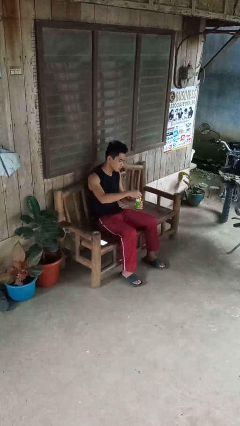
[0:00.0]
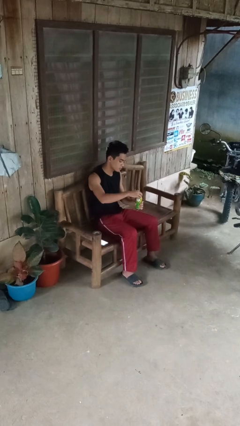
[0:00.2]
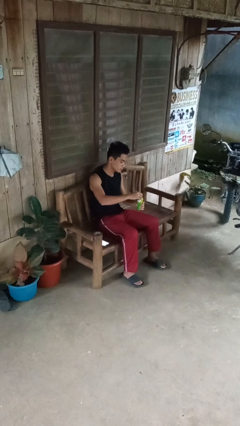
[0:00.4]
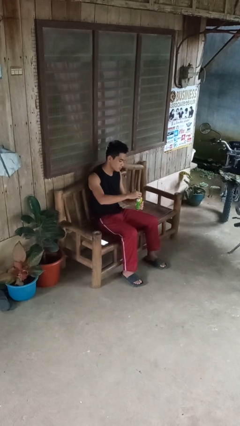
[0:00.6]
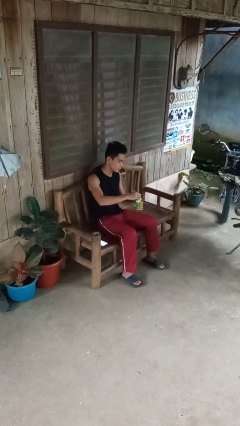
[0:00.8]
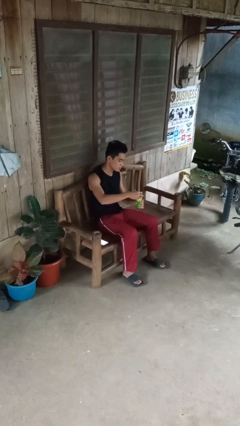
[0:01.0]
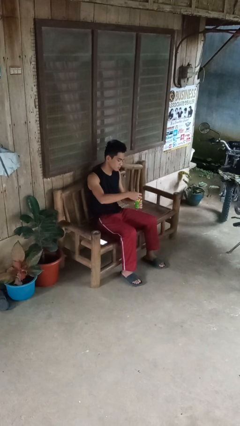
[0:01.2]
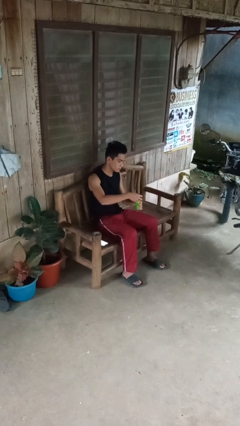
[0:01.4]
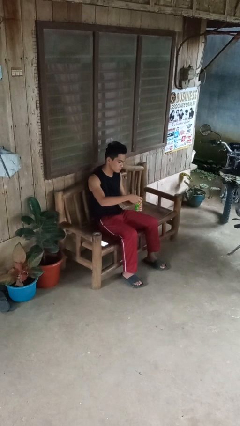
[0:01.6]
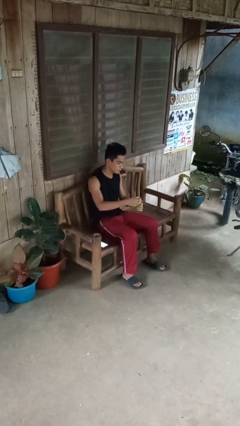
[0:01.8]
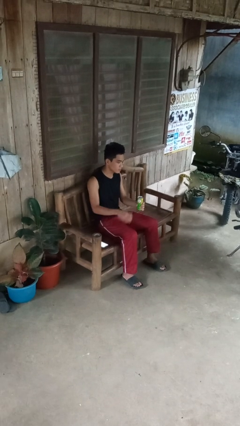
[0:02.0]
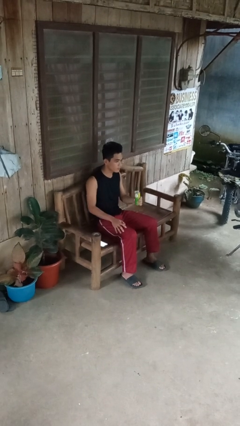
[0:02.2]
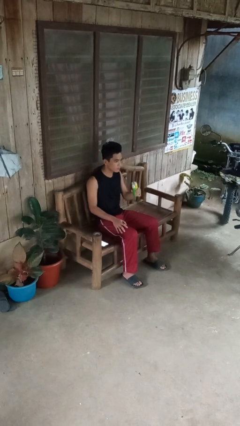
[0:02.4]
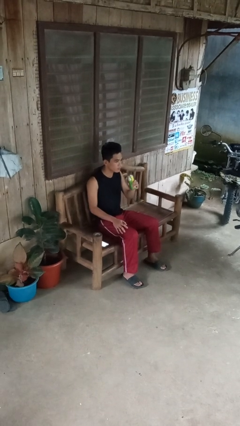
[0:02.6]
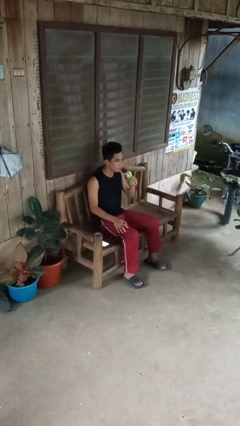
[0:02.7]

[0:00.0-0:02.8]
person opens beverage can

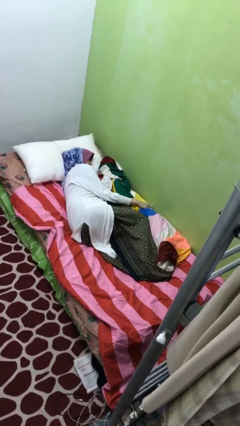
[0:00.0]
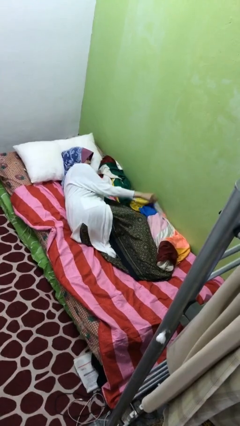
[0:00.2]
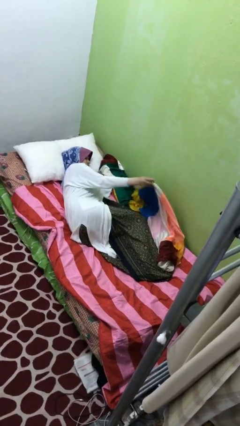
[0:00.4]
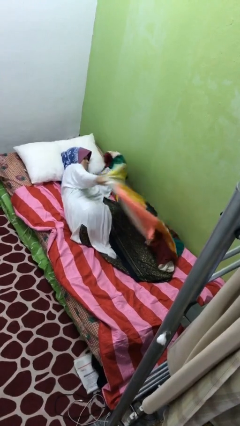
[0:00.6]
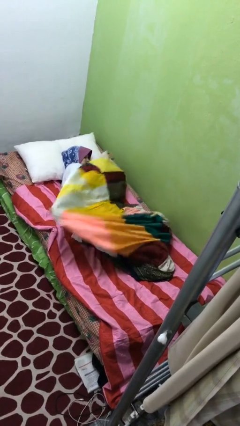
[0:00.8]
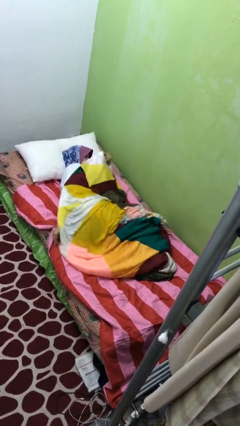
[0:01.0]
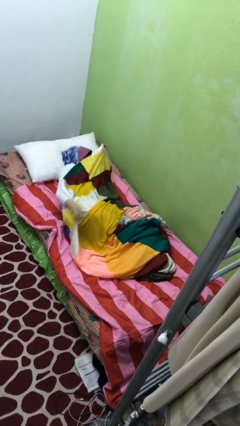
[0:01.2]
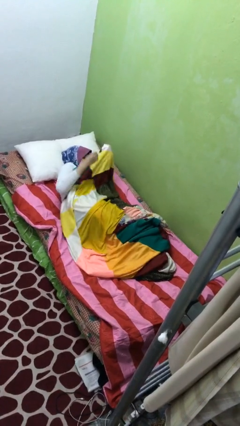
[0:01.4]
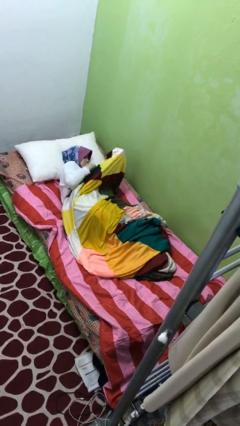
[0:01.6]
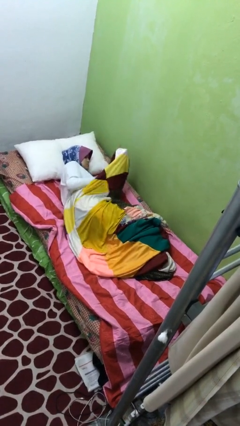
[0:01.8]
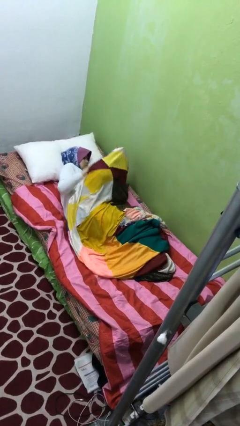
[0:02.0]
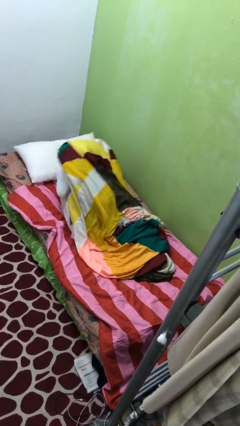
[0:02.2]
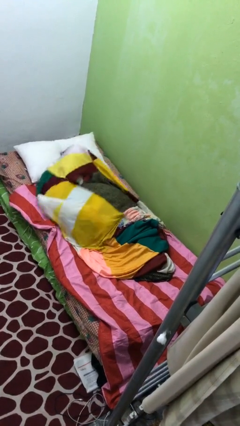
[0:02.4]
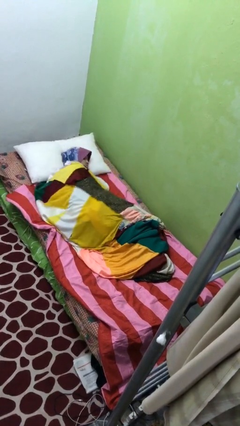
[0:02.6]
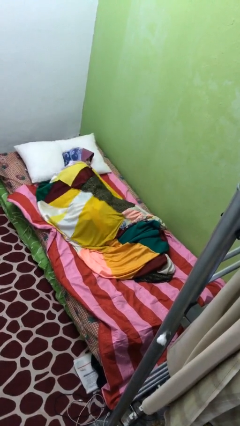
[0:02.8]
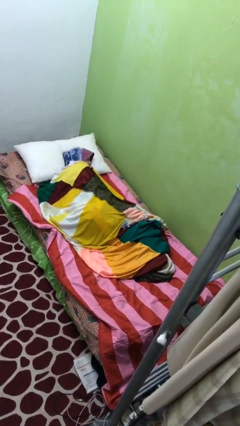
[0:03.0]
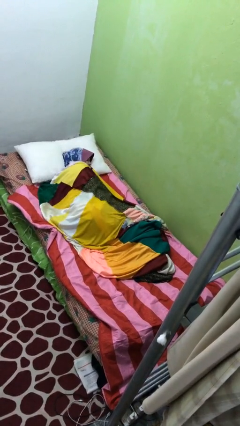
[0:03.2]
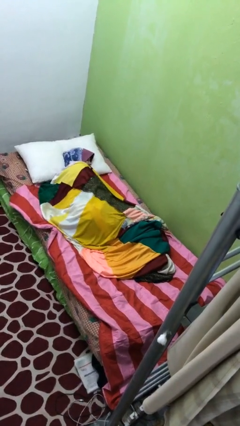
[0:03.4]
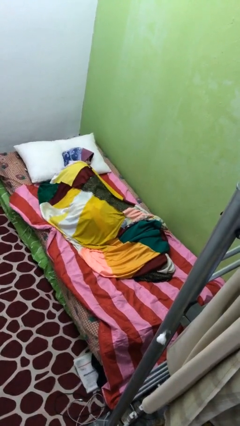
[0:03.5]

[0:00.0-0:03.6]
person covers with blanket

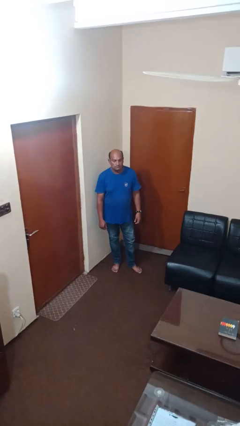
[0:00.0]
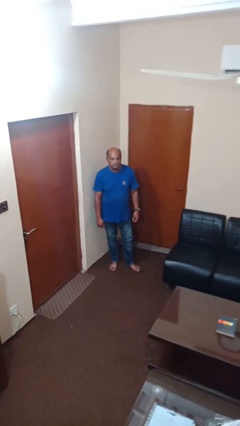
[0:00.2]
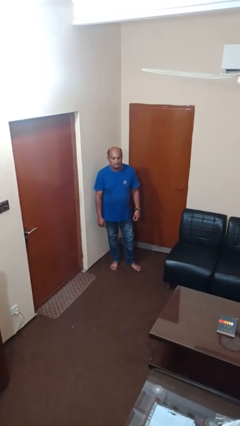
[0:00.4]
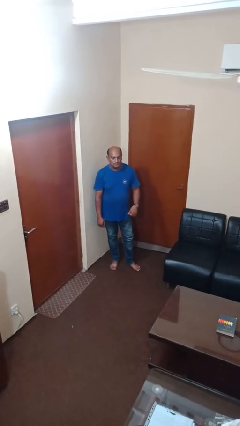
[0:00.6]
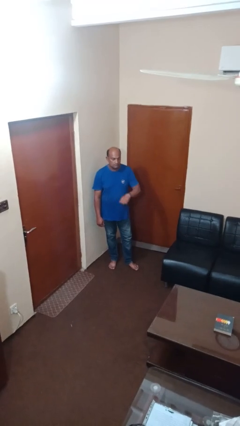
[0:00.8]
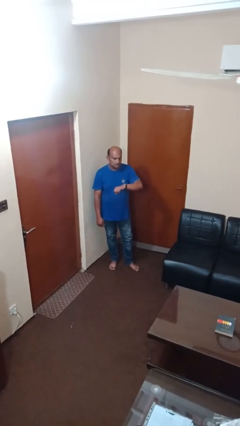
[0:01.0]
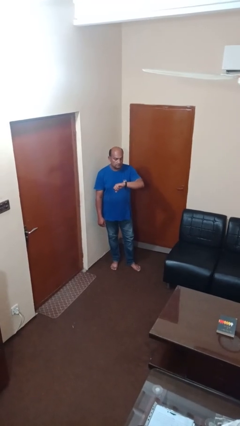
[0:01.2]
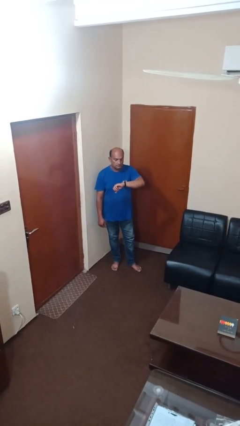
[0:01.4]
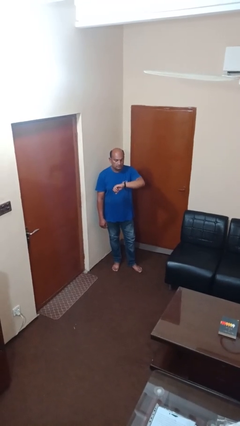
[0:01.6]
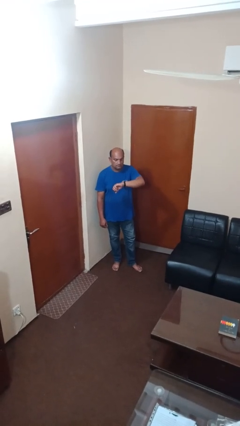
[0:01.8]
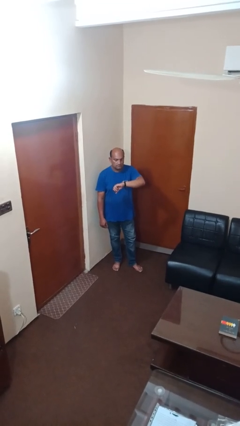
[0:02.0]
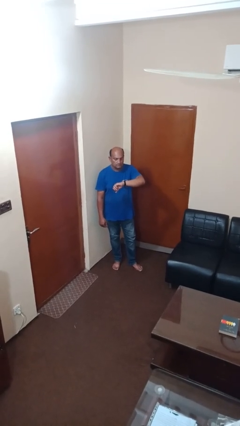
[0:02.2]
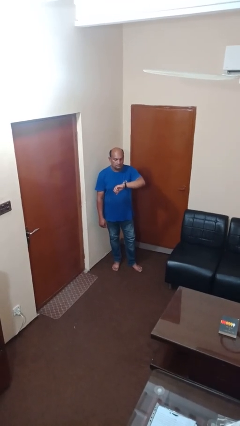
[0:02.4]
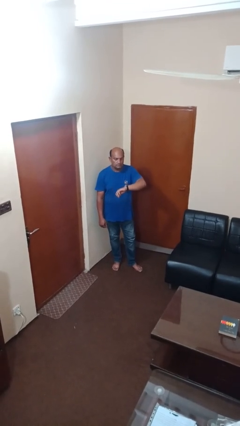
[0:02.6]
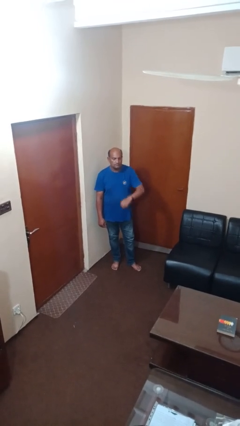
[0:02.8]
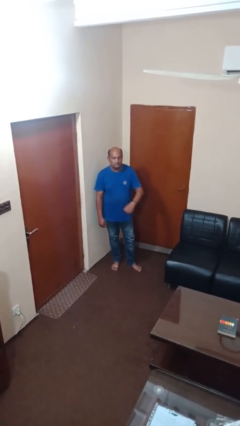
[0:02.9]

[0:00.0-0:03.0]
person looks at wristwatch

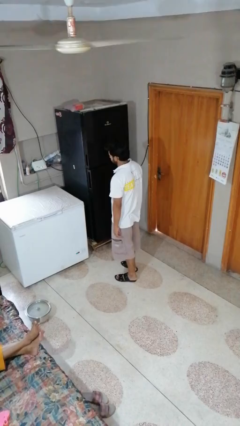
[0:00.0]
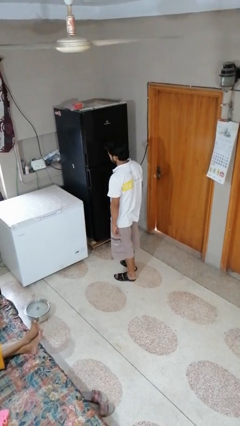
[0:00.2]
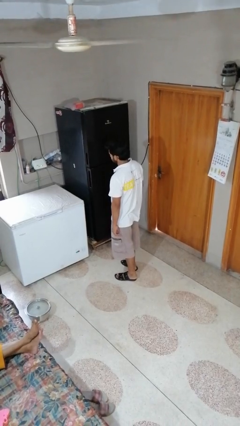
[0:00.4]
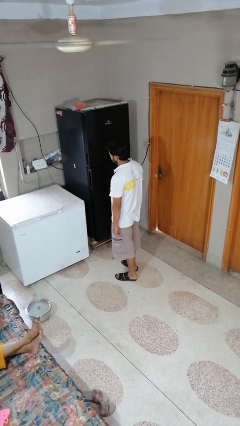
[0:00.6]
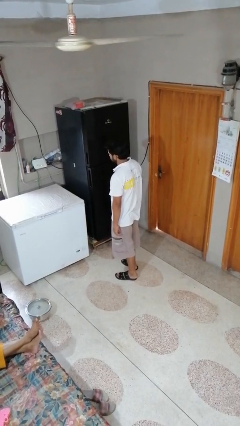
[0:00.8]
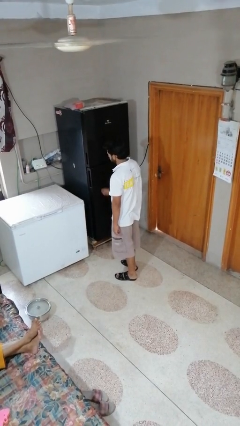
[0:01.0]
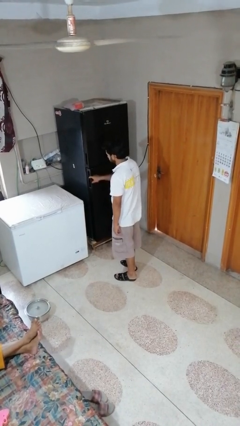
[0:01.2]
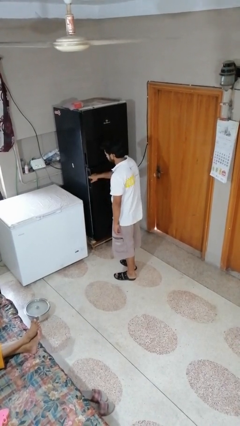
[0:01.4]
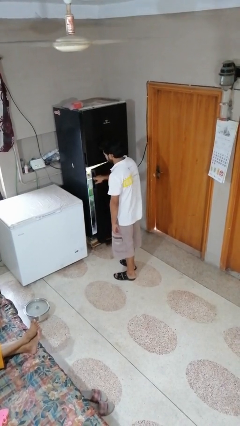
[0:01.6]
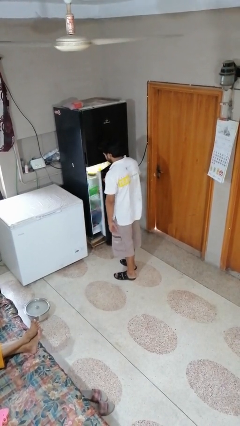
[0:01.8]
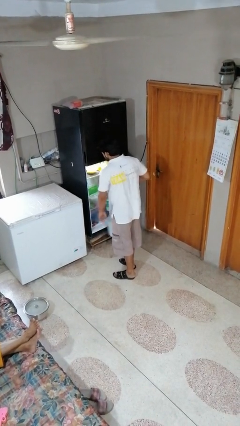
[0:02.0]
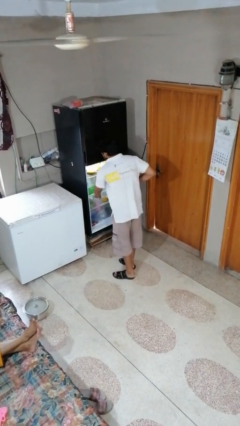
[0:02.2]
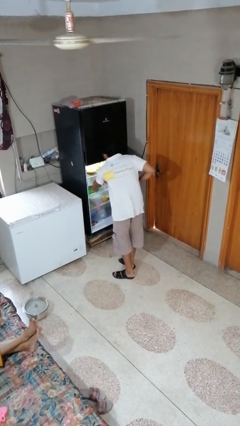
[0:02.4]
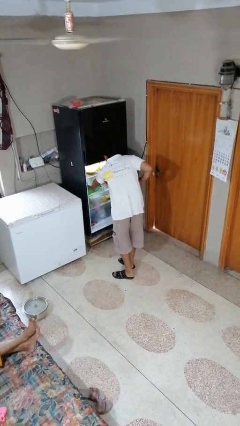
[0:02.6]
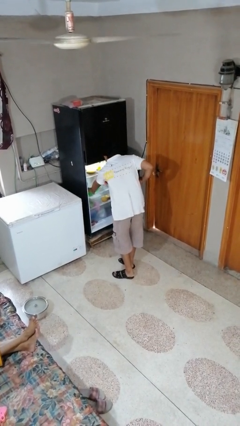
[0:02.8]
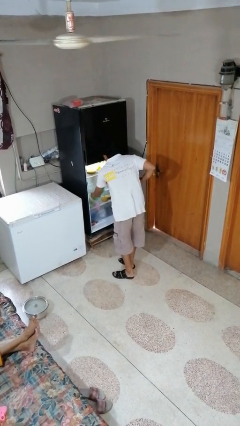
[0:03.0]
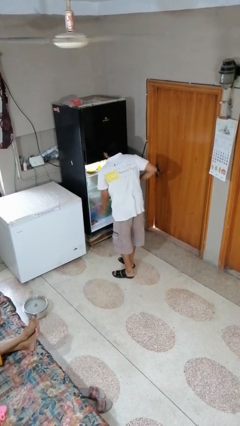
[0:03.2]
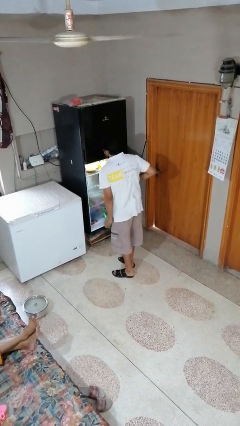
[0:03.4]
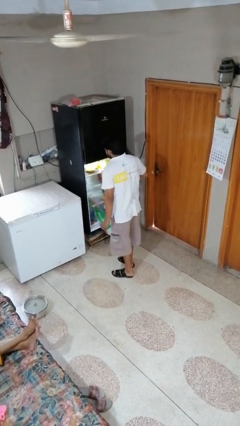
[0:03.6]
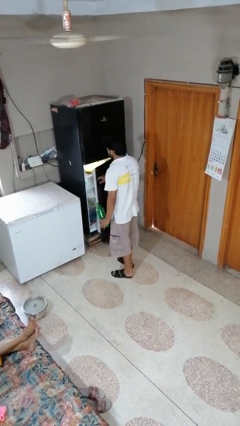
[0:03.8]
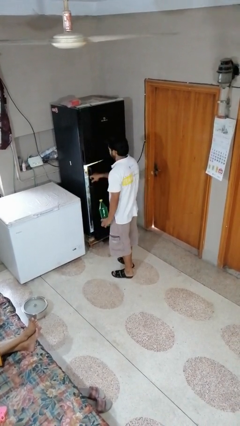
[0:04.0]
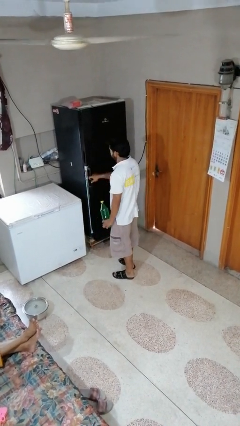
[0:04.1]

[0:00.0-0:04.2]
person takes object from refrigerator

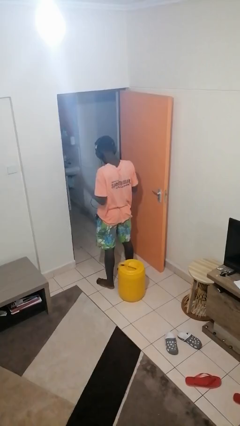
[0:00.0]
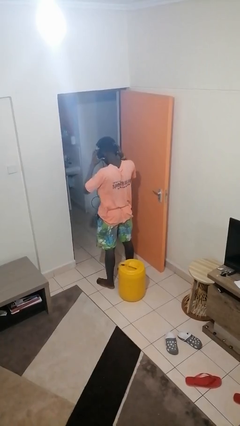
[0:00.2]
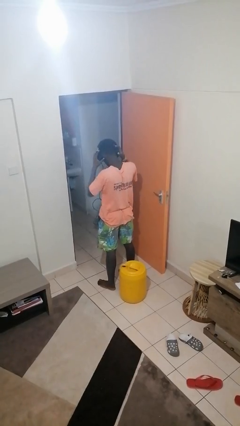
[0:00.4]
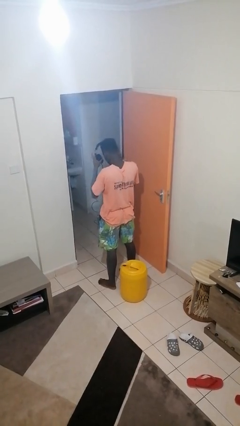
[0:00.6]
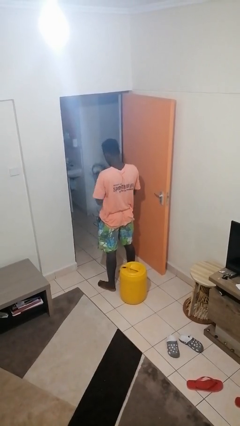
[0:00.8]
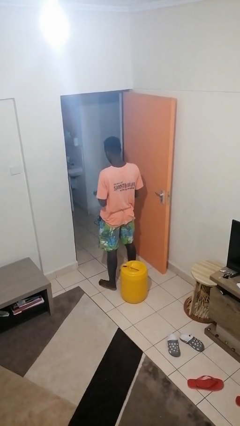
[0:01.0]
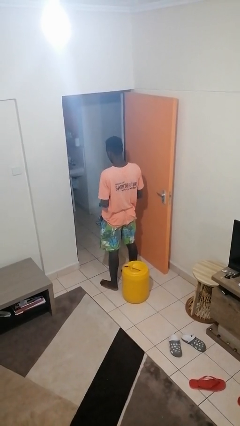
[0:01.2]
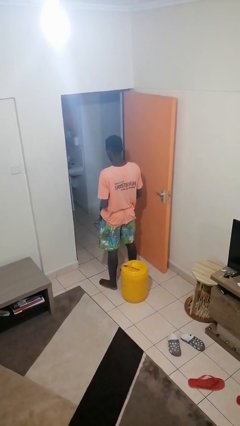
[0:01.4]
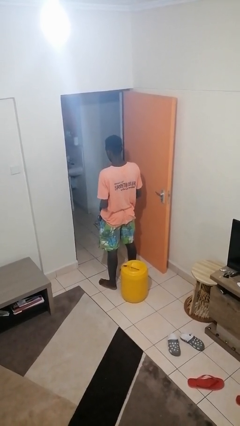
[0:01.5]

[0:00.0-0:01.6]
person takes off headphones

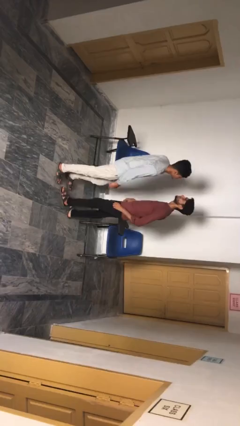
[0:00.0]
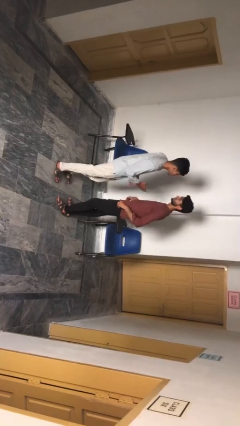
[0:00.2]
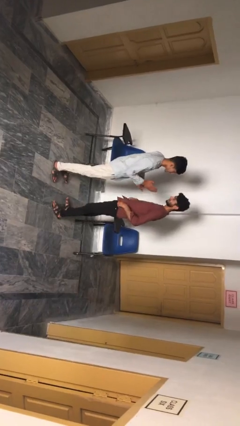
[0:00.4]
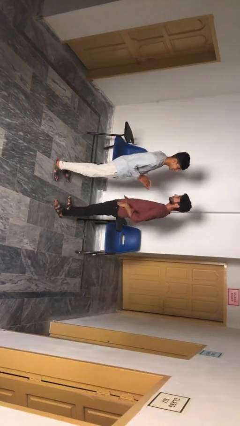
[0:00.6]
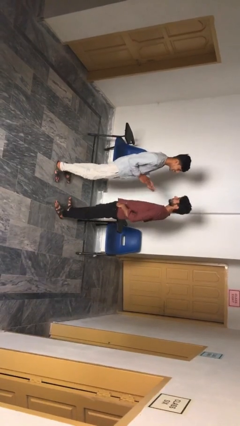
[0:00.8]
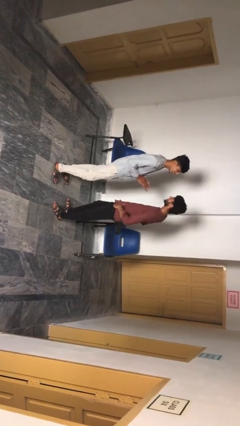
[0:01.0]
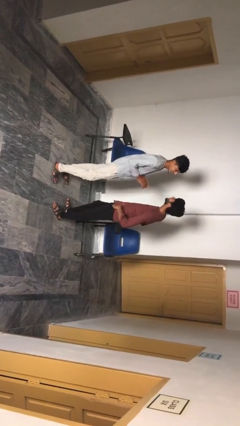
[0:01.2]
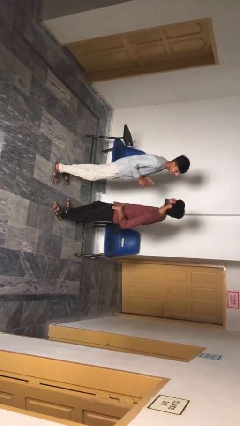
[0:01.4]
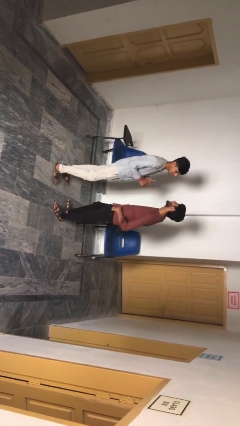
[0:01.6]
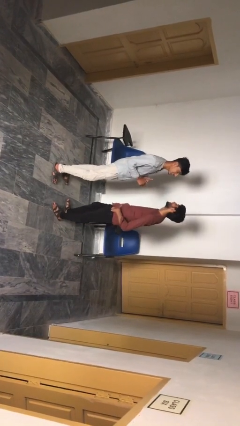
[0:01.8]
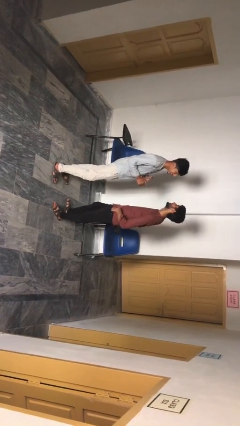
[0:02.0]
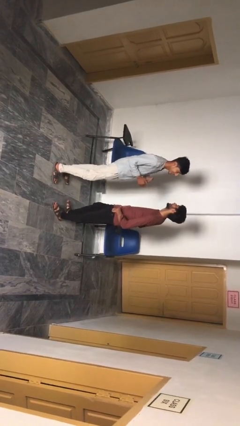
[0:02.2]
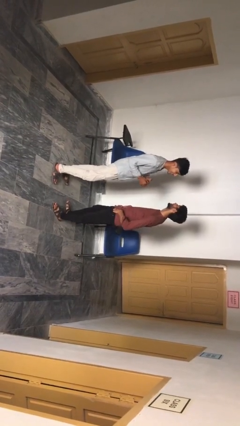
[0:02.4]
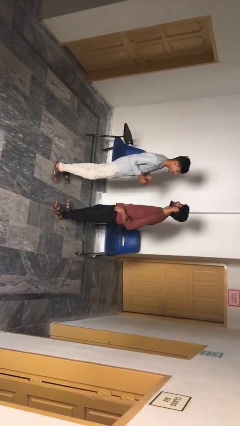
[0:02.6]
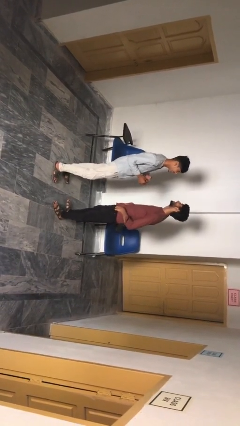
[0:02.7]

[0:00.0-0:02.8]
person talks to person
